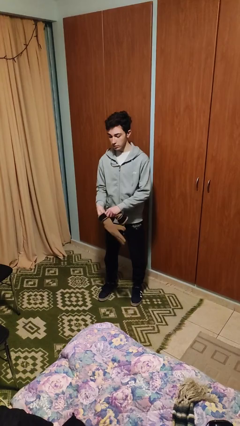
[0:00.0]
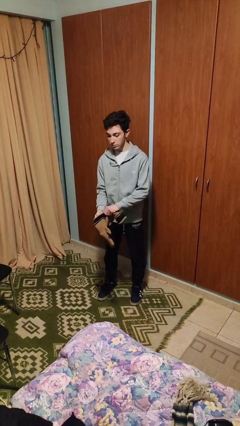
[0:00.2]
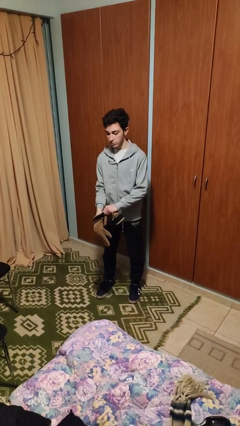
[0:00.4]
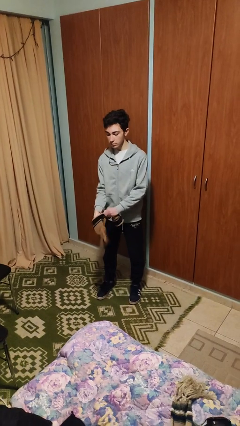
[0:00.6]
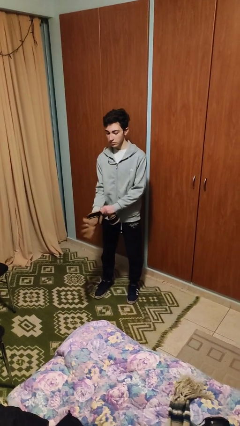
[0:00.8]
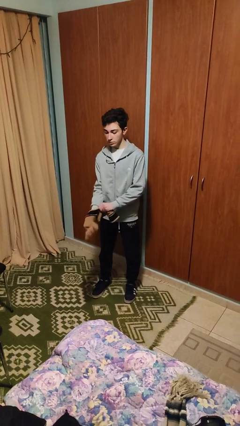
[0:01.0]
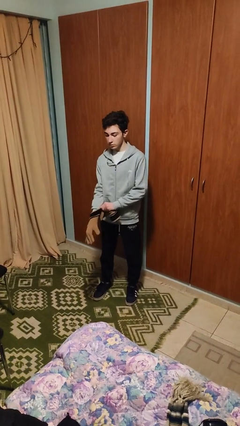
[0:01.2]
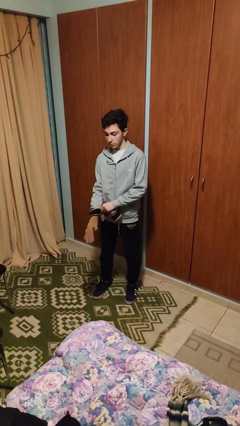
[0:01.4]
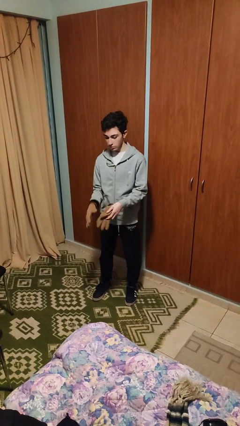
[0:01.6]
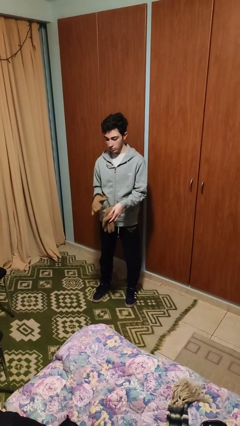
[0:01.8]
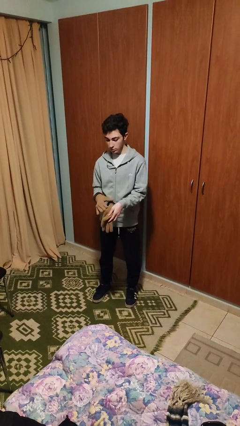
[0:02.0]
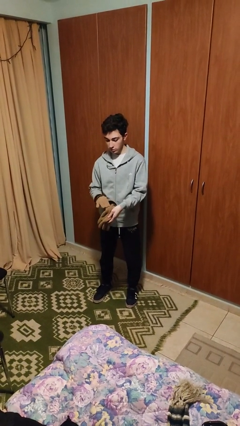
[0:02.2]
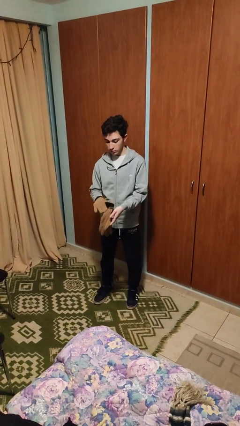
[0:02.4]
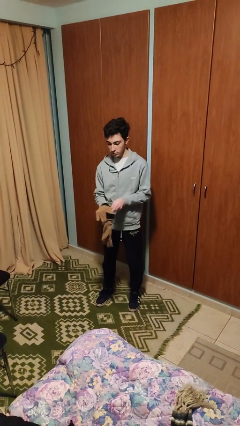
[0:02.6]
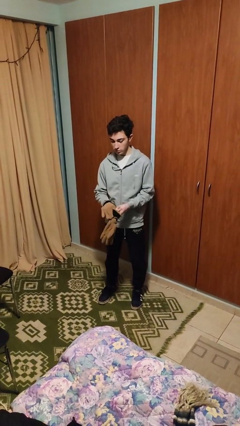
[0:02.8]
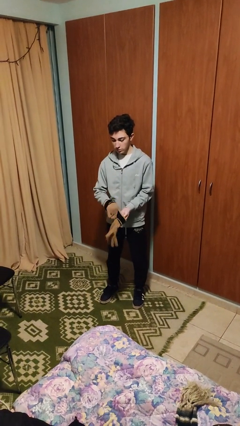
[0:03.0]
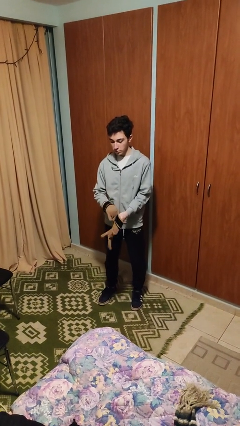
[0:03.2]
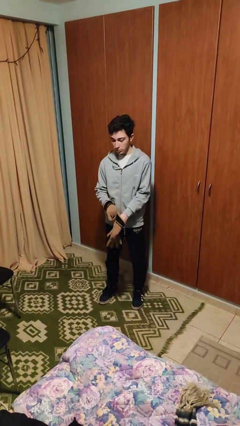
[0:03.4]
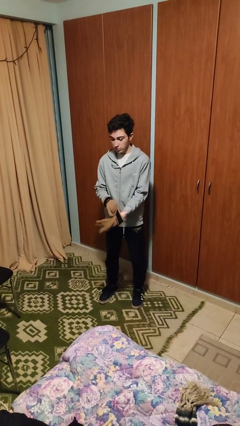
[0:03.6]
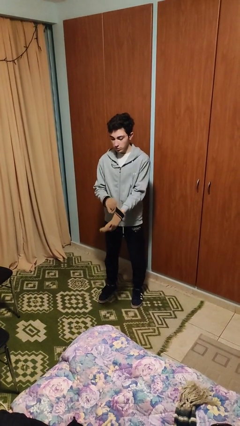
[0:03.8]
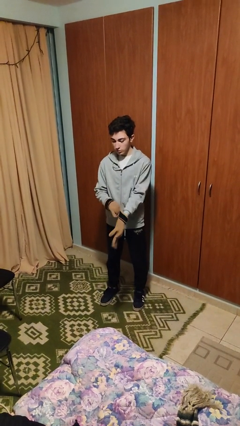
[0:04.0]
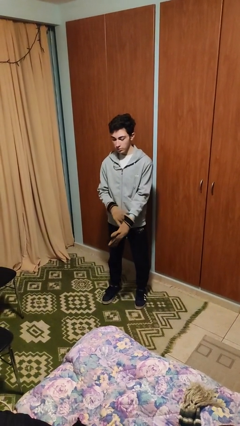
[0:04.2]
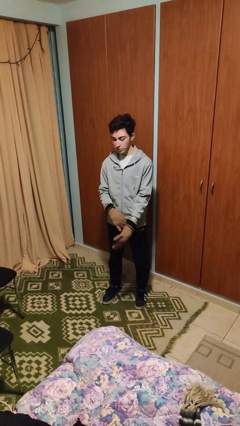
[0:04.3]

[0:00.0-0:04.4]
person puts on gloves

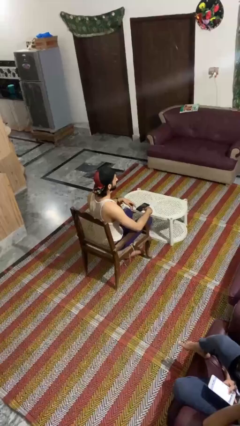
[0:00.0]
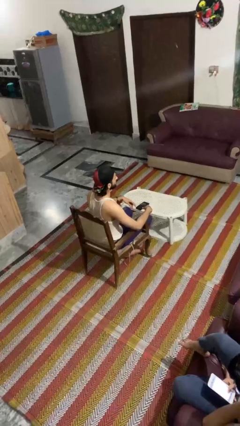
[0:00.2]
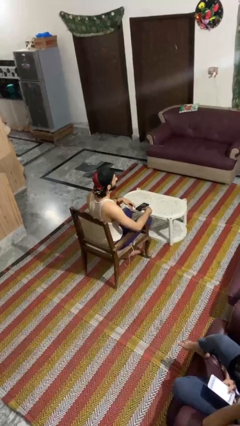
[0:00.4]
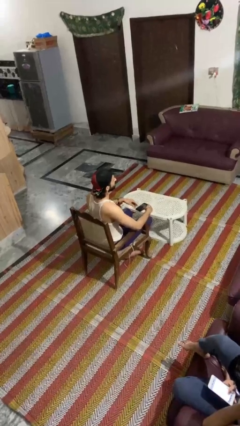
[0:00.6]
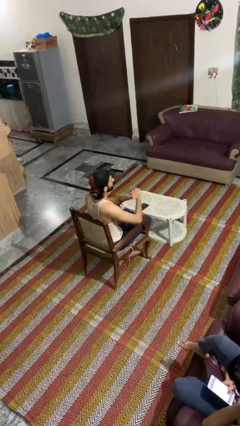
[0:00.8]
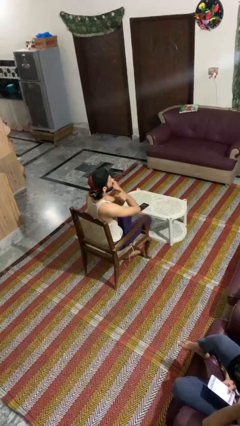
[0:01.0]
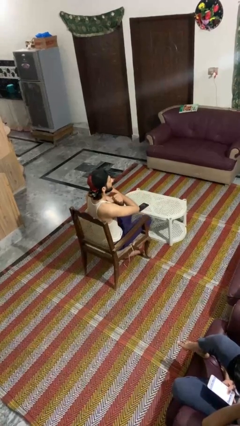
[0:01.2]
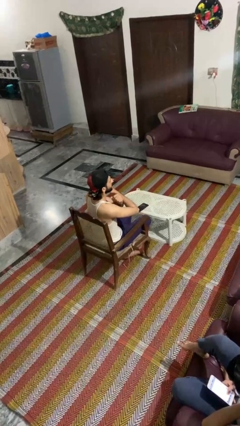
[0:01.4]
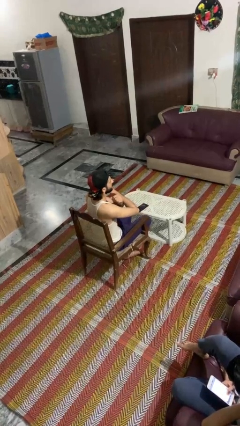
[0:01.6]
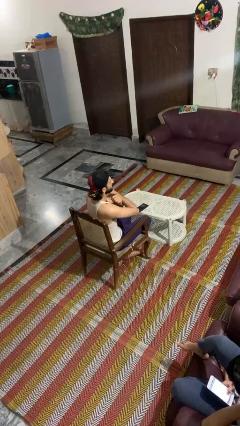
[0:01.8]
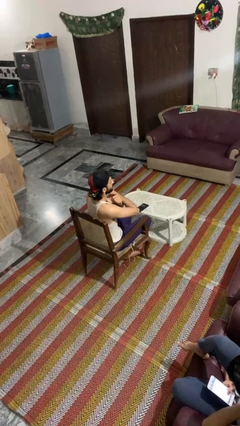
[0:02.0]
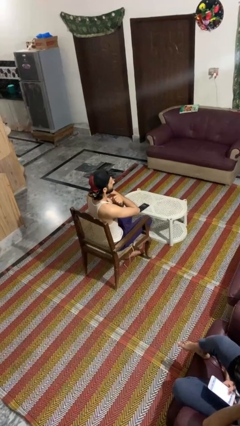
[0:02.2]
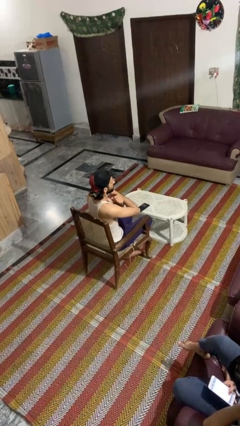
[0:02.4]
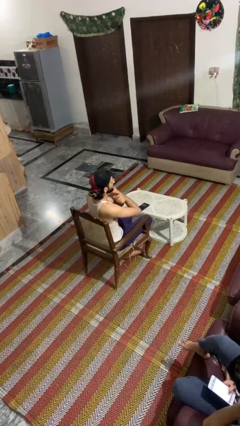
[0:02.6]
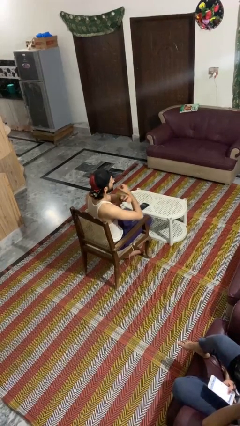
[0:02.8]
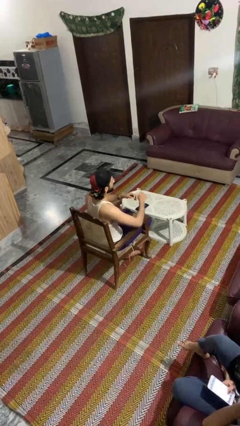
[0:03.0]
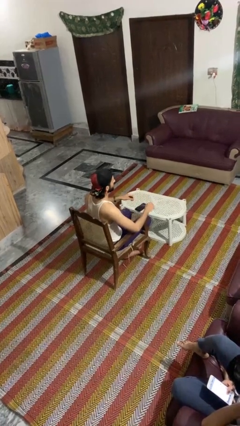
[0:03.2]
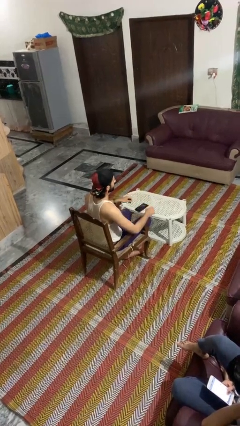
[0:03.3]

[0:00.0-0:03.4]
person gestures arms x

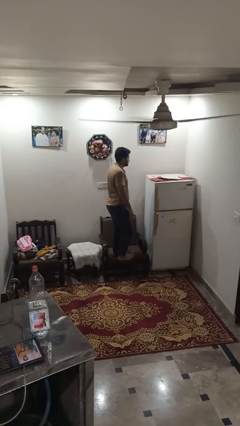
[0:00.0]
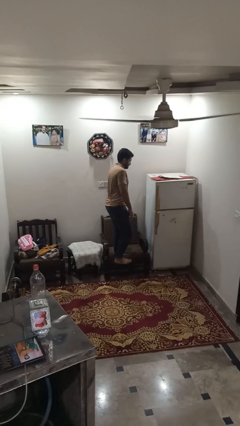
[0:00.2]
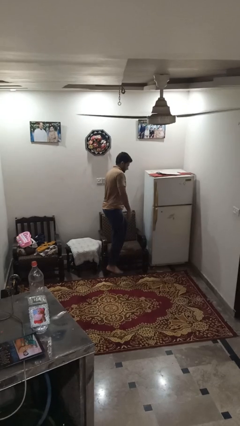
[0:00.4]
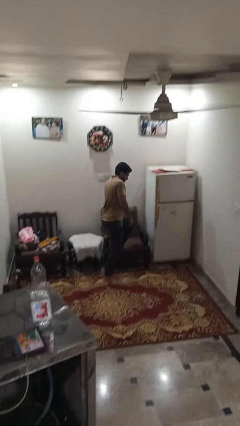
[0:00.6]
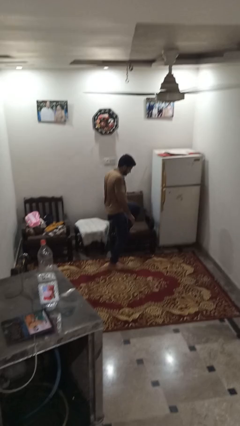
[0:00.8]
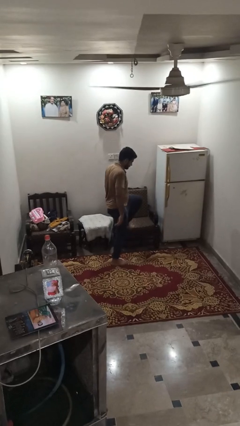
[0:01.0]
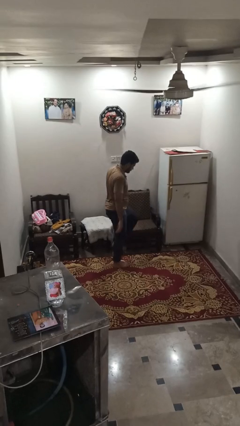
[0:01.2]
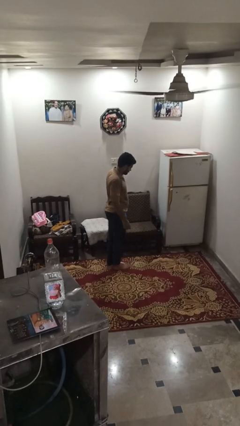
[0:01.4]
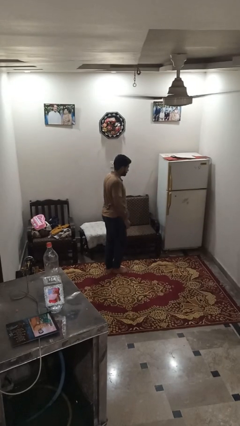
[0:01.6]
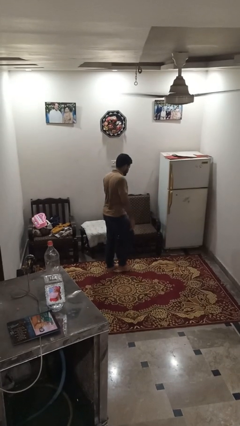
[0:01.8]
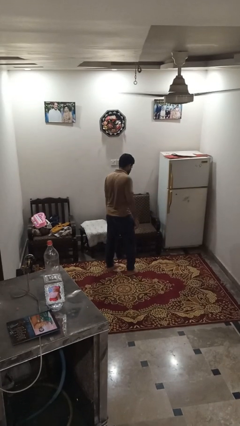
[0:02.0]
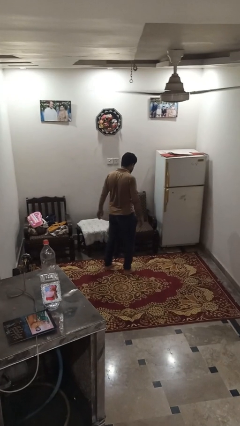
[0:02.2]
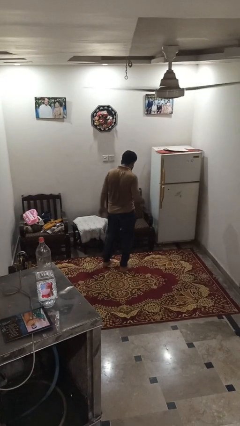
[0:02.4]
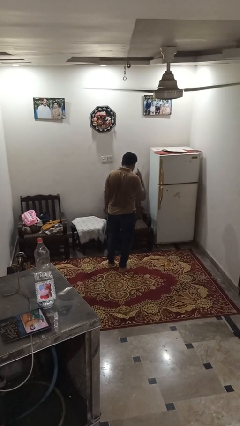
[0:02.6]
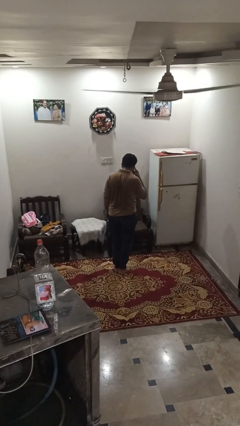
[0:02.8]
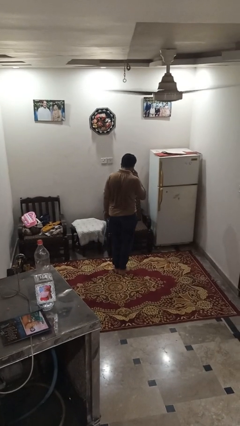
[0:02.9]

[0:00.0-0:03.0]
person climbs off couch

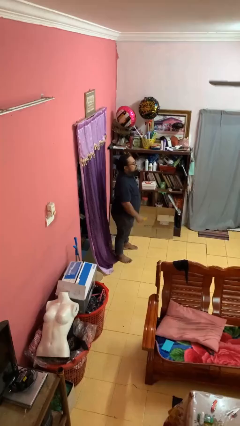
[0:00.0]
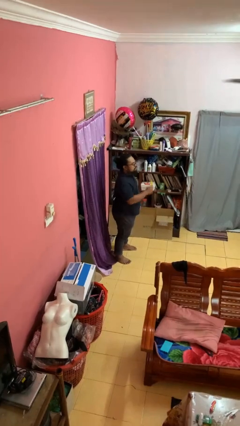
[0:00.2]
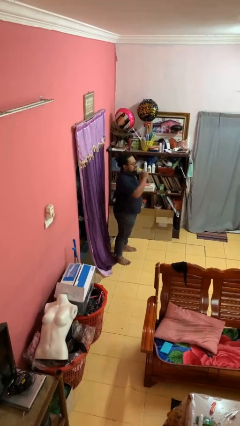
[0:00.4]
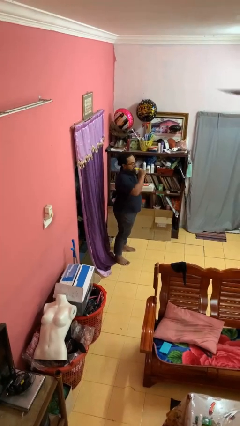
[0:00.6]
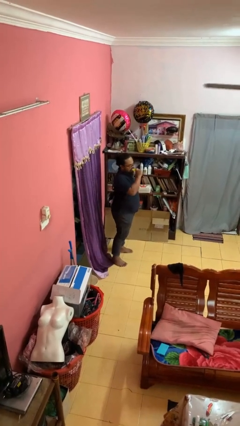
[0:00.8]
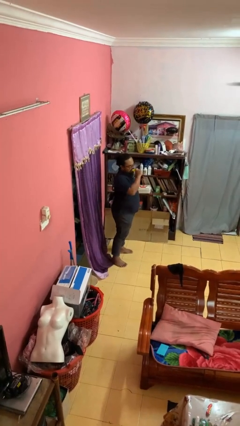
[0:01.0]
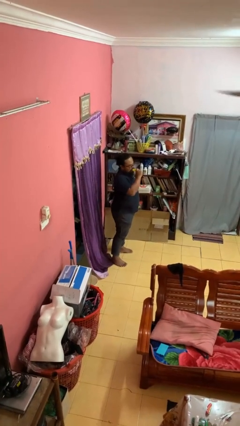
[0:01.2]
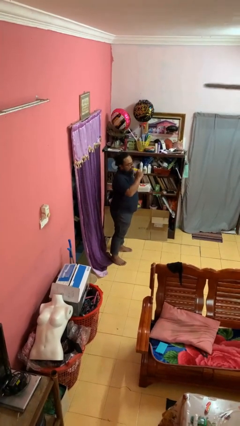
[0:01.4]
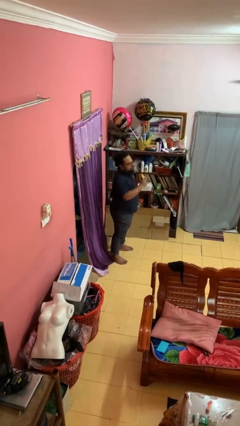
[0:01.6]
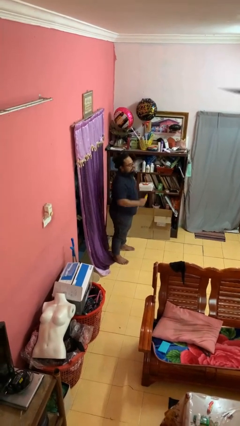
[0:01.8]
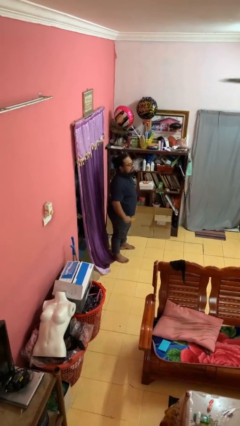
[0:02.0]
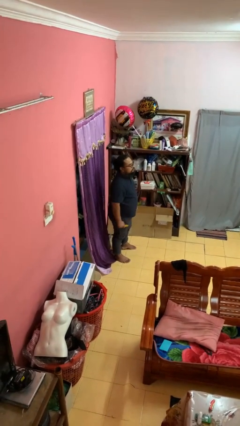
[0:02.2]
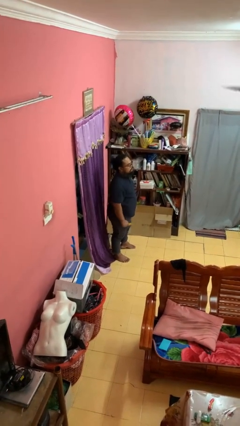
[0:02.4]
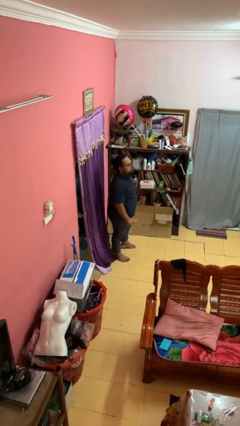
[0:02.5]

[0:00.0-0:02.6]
person eats banana

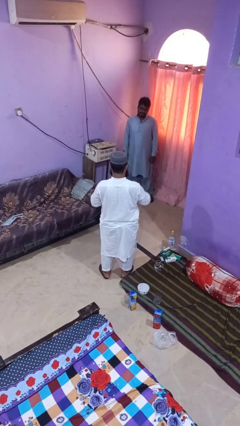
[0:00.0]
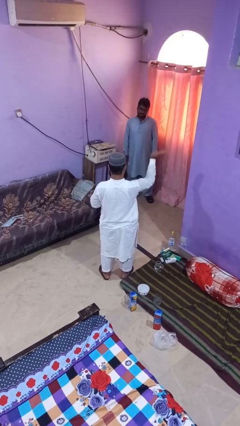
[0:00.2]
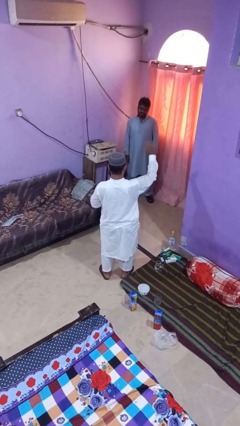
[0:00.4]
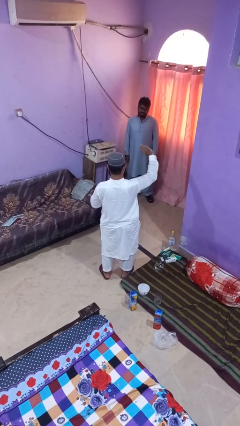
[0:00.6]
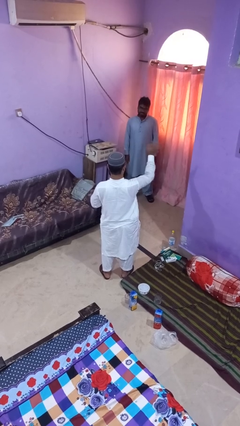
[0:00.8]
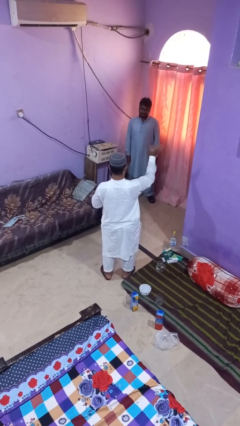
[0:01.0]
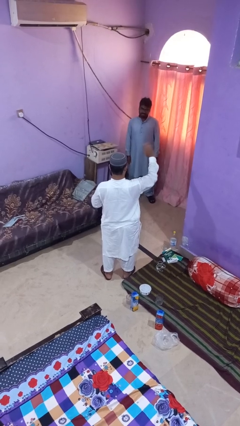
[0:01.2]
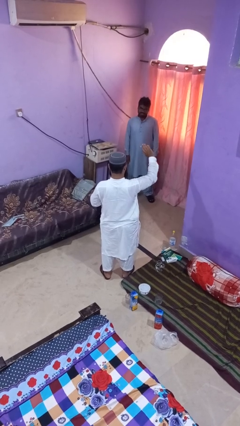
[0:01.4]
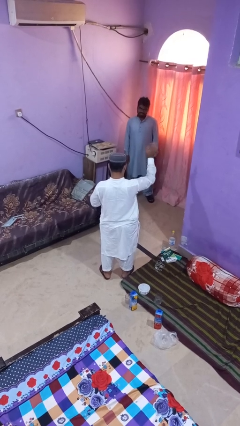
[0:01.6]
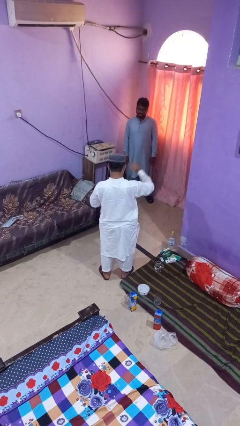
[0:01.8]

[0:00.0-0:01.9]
person waves at person

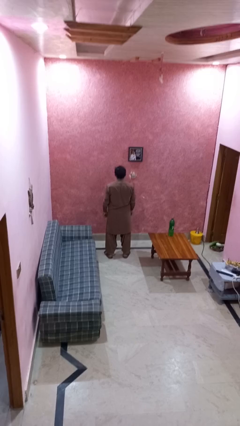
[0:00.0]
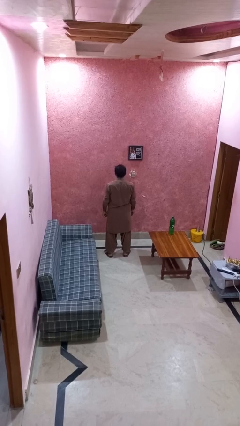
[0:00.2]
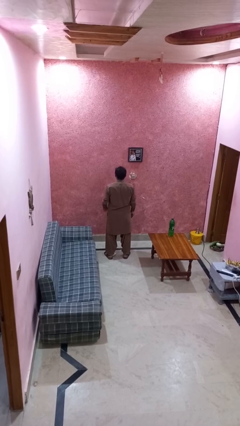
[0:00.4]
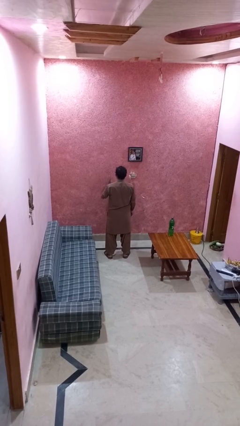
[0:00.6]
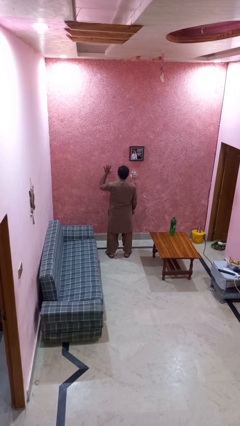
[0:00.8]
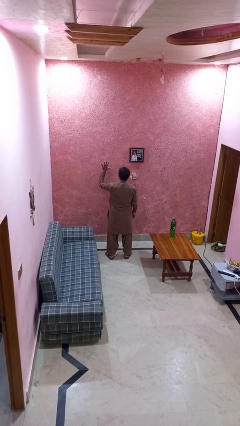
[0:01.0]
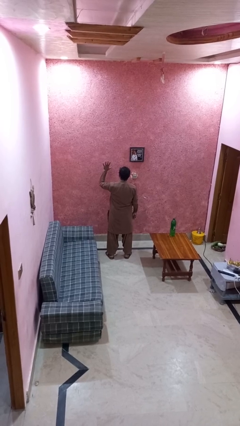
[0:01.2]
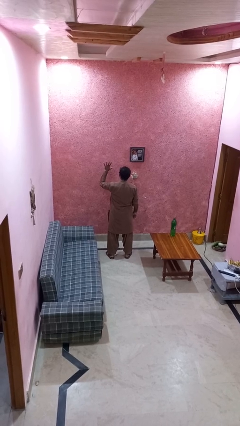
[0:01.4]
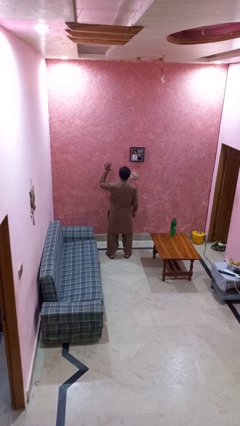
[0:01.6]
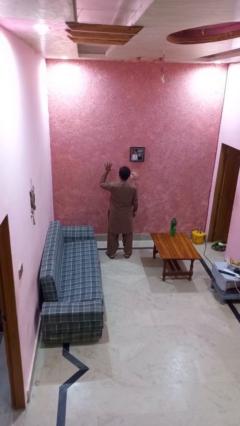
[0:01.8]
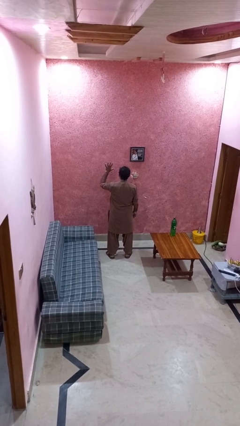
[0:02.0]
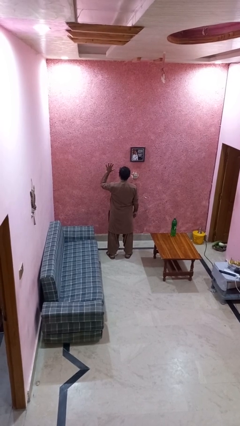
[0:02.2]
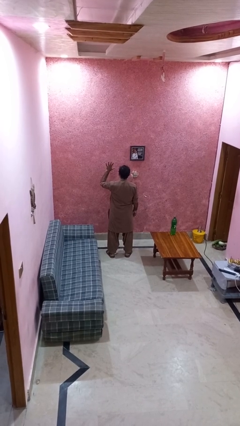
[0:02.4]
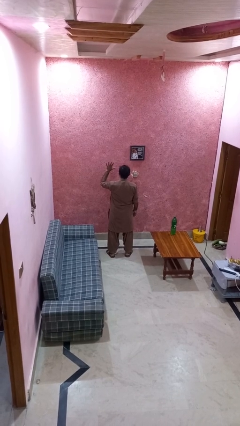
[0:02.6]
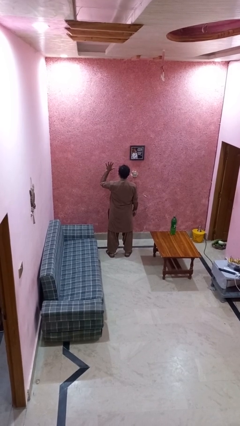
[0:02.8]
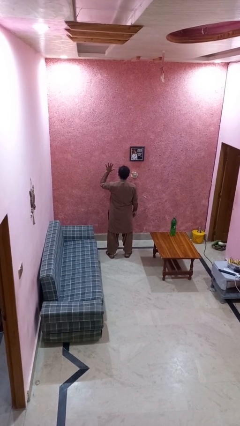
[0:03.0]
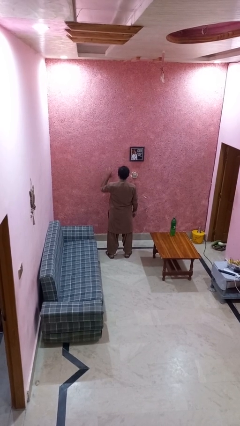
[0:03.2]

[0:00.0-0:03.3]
person gestures number five
